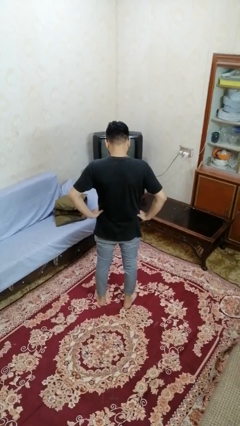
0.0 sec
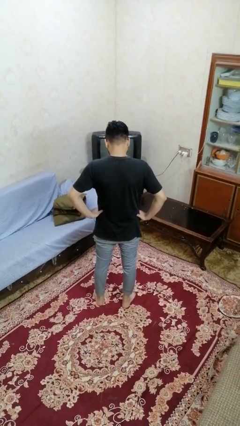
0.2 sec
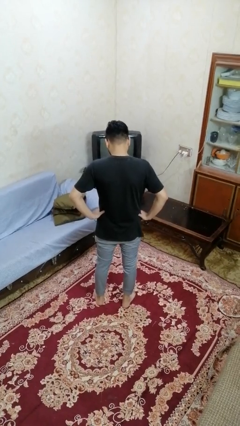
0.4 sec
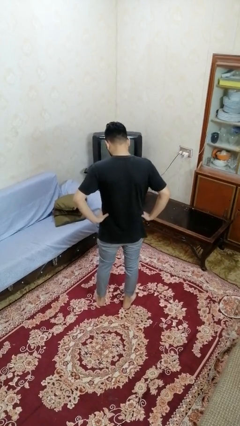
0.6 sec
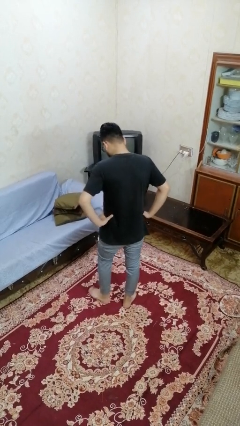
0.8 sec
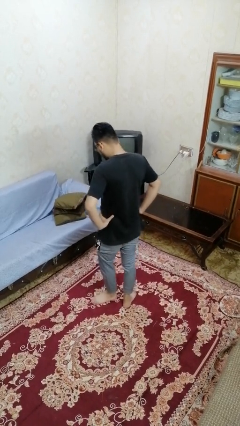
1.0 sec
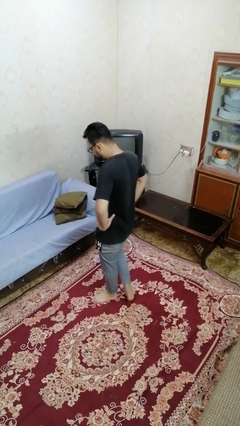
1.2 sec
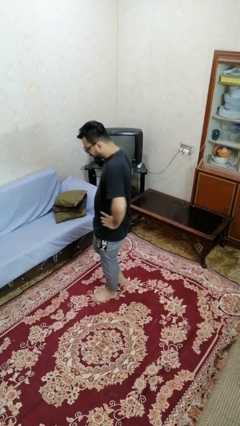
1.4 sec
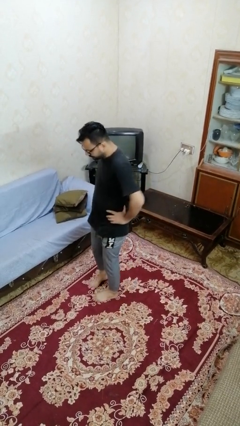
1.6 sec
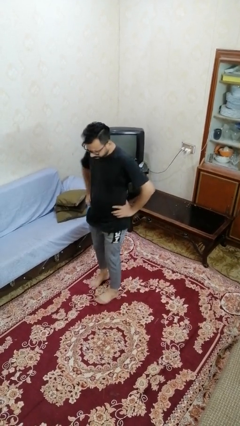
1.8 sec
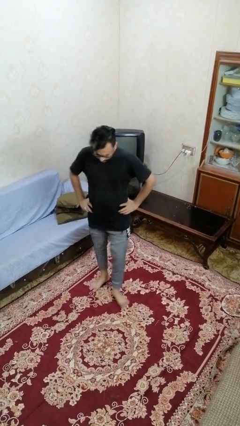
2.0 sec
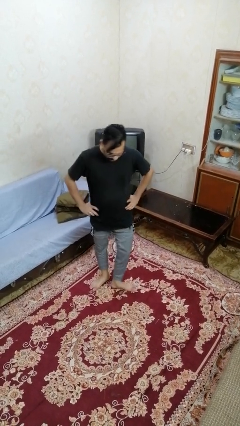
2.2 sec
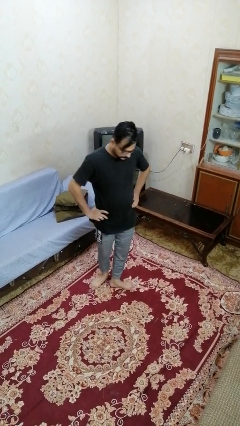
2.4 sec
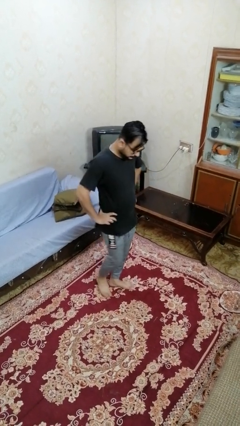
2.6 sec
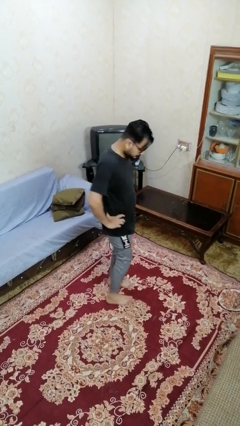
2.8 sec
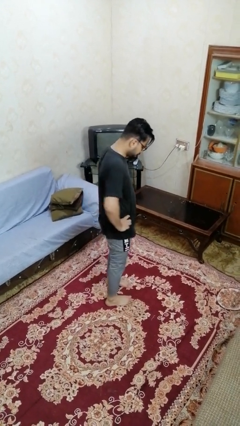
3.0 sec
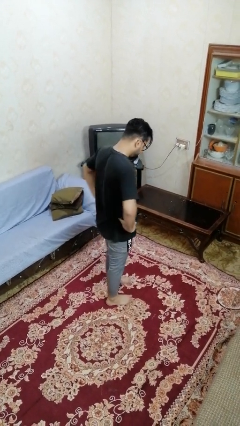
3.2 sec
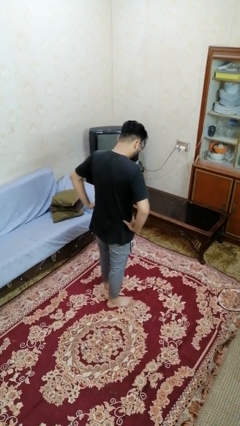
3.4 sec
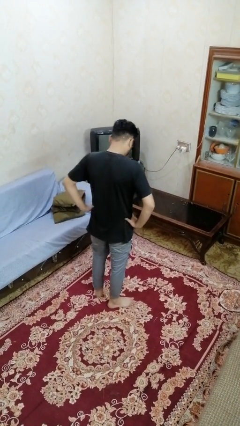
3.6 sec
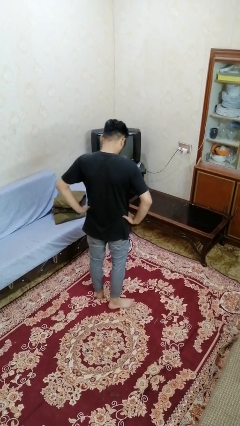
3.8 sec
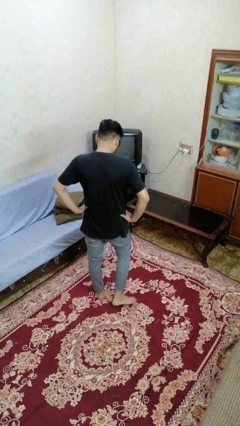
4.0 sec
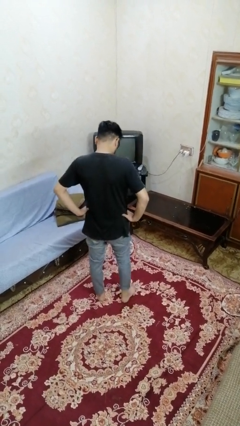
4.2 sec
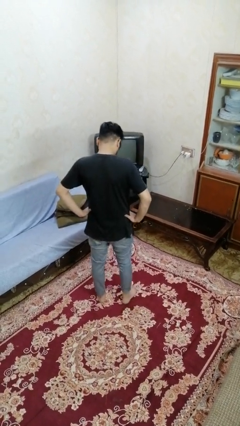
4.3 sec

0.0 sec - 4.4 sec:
person twirls

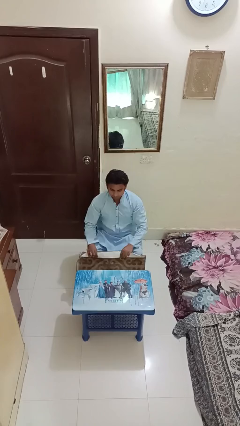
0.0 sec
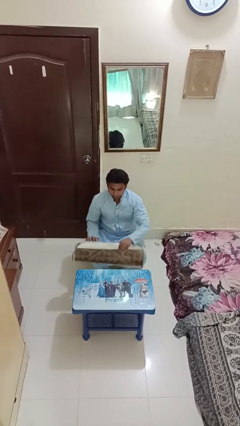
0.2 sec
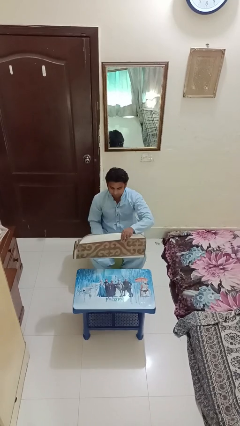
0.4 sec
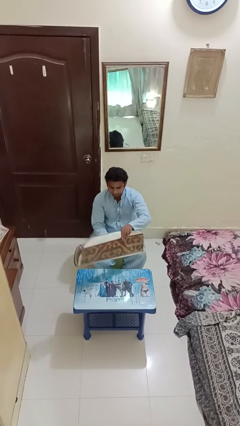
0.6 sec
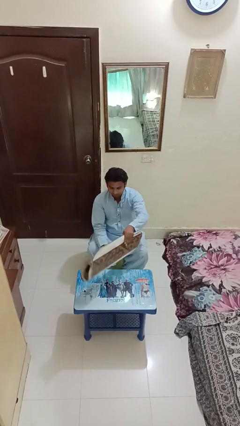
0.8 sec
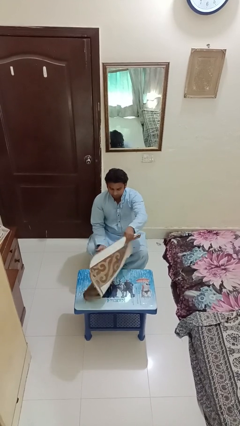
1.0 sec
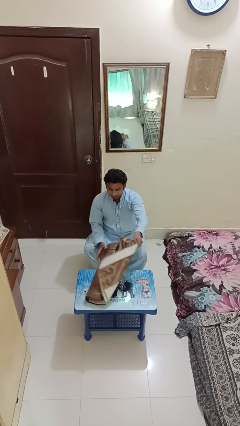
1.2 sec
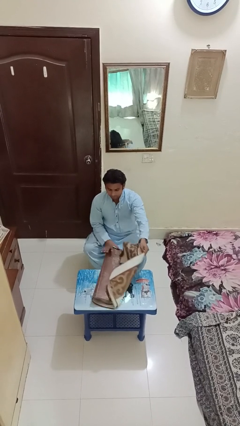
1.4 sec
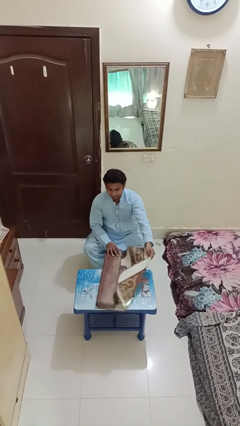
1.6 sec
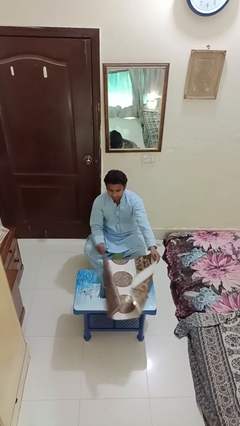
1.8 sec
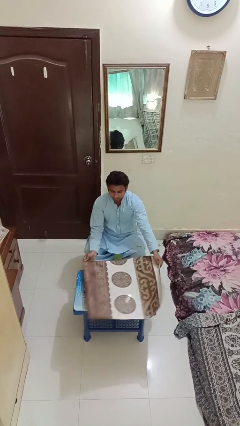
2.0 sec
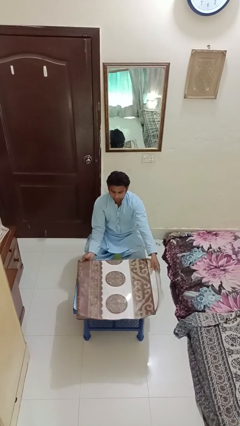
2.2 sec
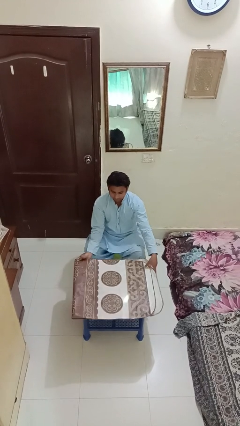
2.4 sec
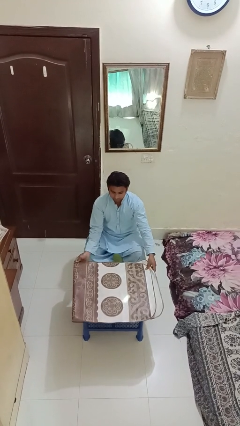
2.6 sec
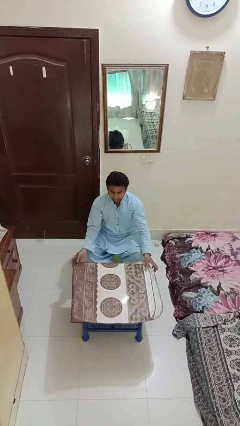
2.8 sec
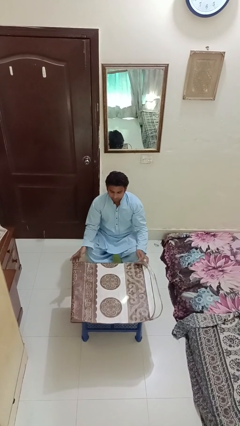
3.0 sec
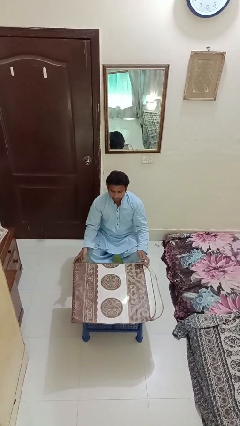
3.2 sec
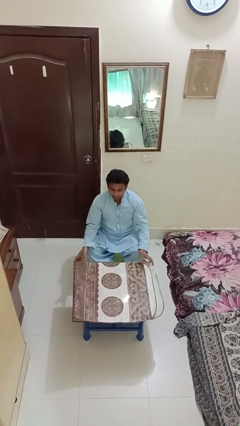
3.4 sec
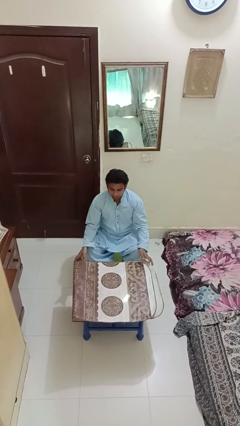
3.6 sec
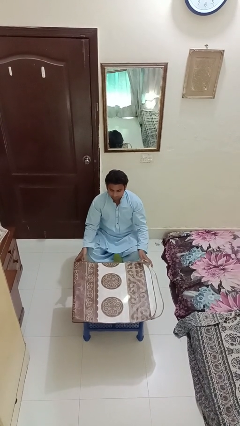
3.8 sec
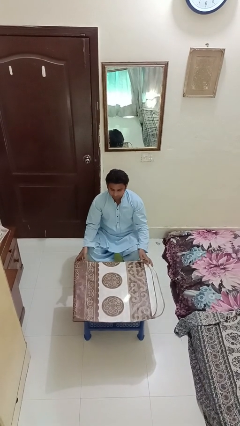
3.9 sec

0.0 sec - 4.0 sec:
person spreads tablecloth

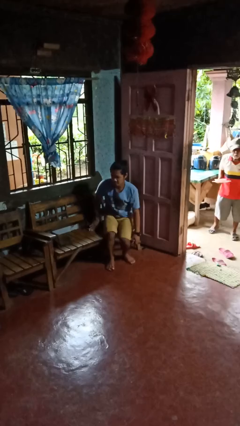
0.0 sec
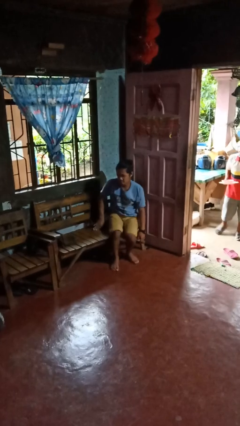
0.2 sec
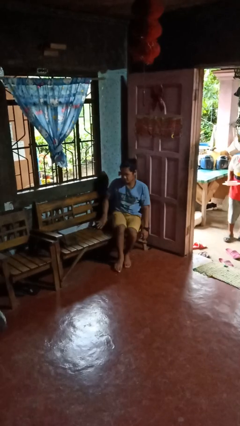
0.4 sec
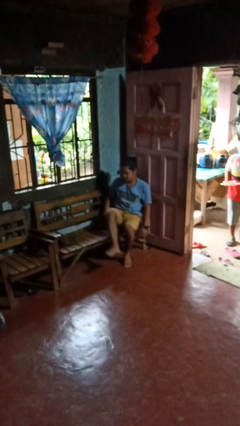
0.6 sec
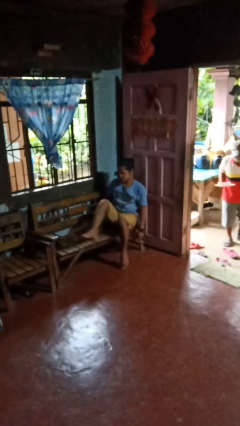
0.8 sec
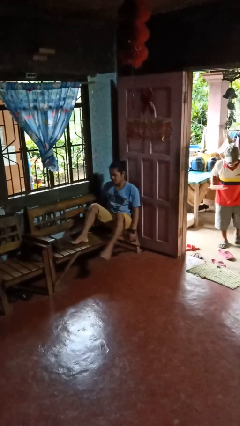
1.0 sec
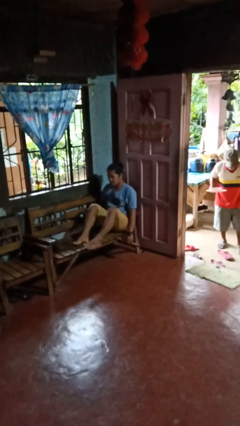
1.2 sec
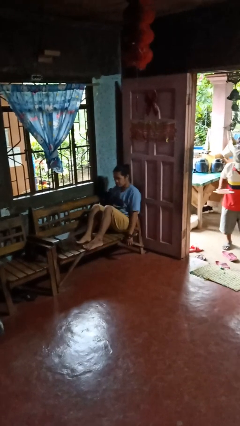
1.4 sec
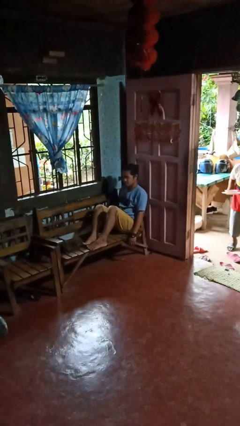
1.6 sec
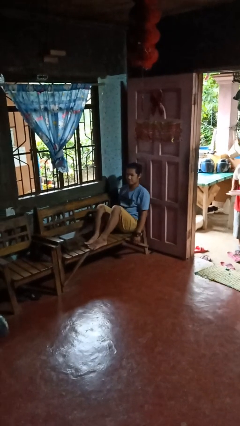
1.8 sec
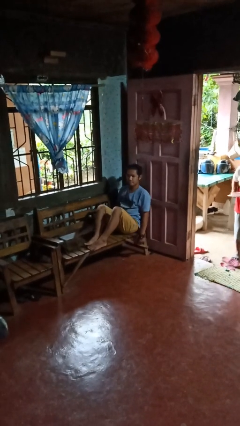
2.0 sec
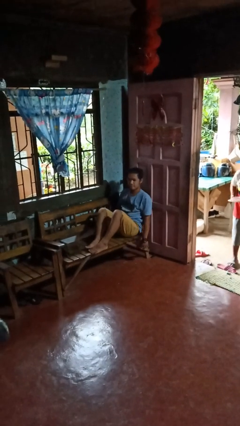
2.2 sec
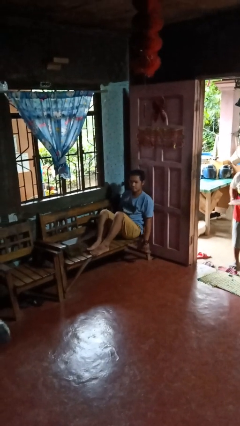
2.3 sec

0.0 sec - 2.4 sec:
person sits down

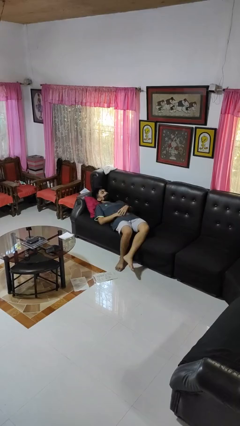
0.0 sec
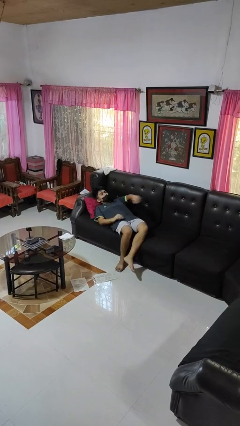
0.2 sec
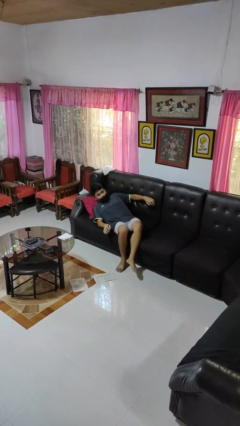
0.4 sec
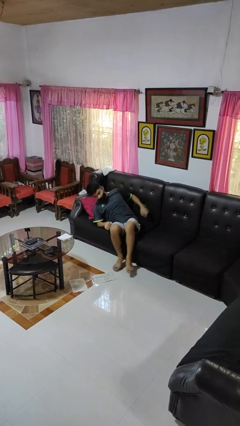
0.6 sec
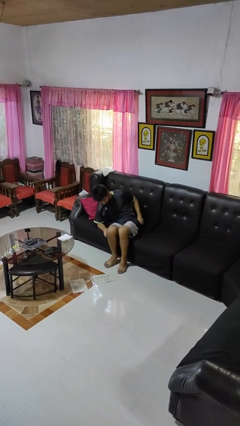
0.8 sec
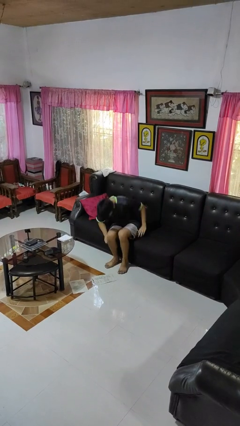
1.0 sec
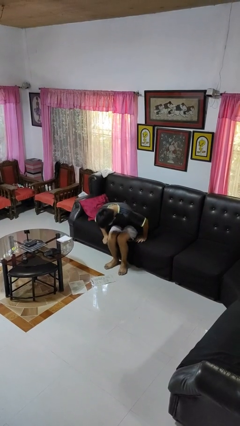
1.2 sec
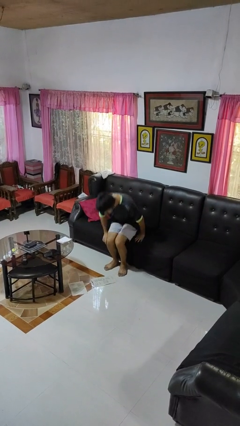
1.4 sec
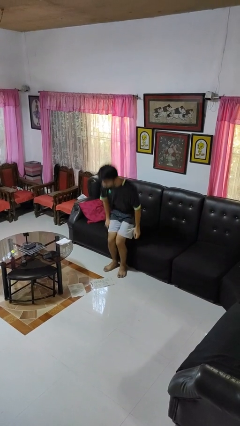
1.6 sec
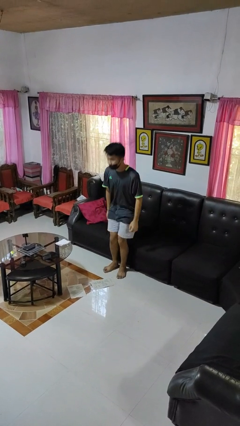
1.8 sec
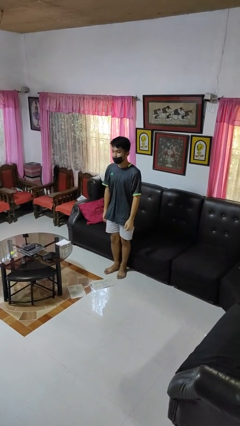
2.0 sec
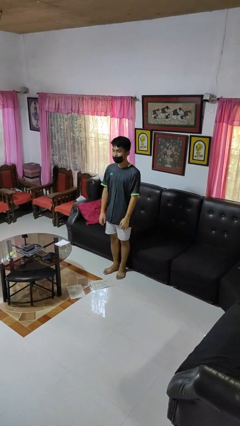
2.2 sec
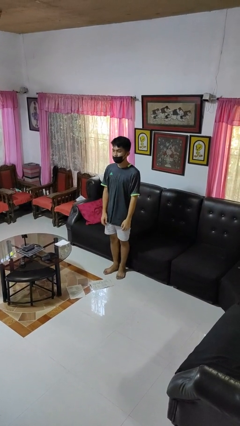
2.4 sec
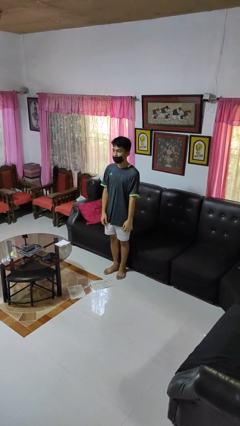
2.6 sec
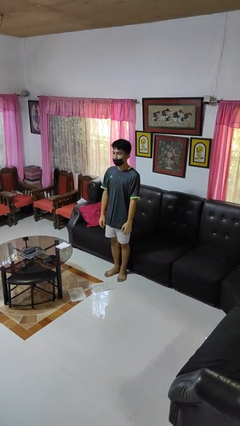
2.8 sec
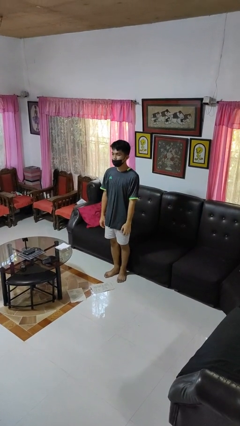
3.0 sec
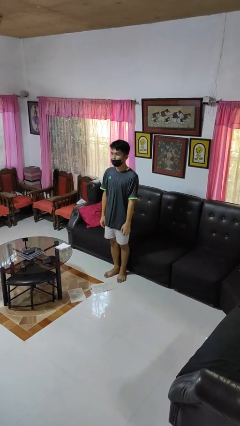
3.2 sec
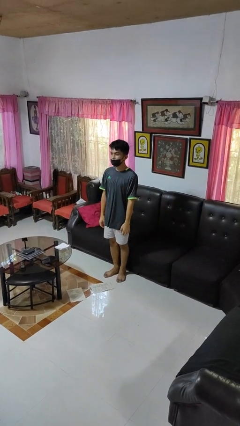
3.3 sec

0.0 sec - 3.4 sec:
person stands up

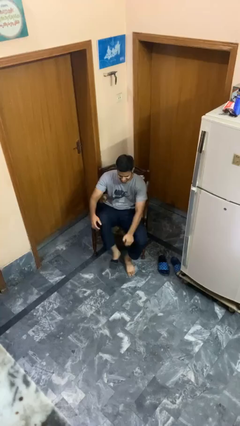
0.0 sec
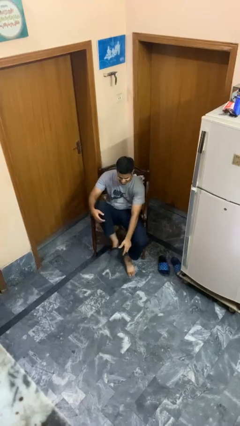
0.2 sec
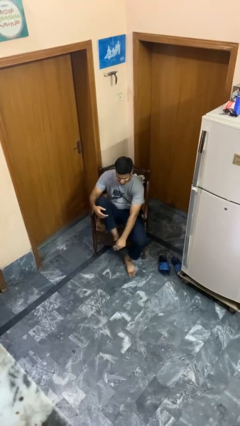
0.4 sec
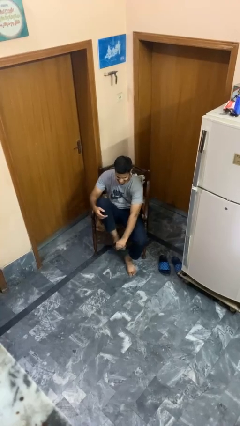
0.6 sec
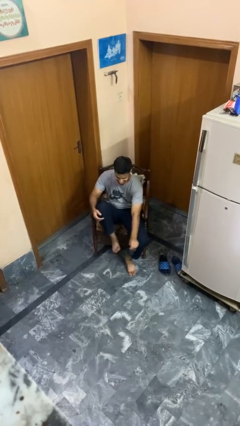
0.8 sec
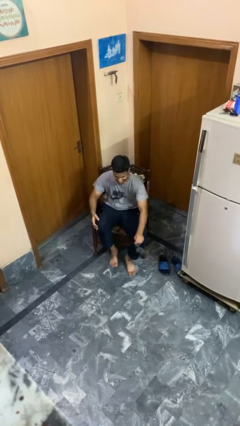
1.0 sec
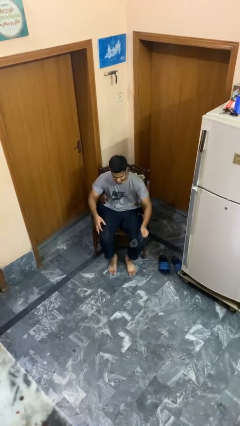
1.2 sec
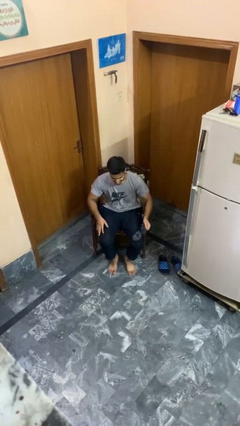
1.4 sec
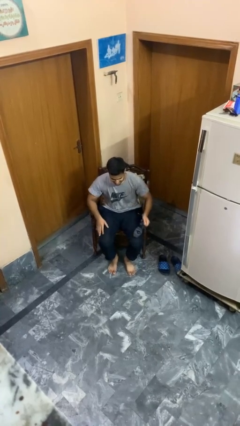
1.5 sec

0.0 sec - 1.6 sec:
person takes off socks

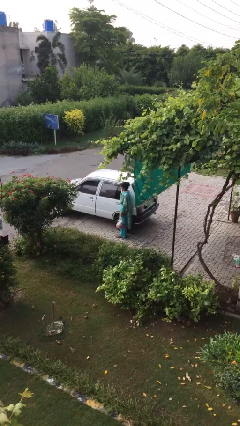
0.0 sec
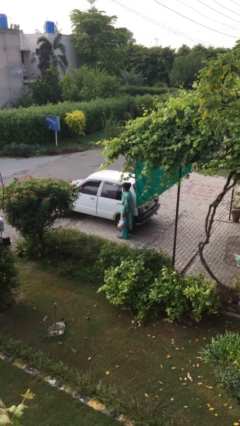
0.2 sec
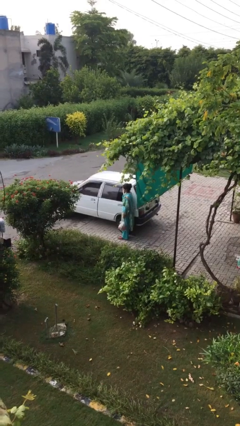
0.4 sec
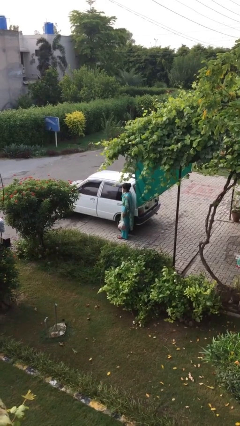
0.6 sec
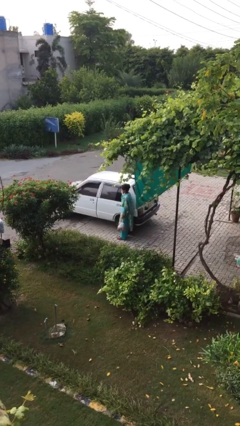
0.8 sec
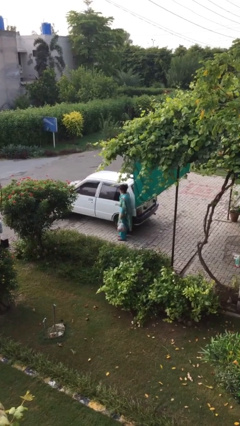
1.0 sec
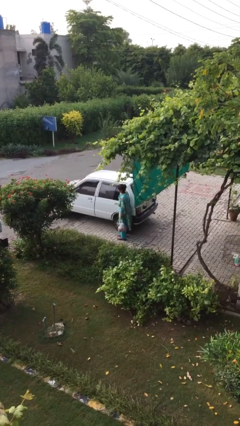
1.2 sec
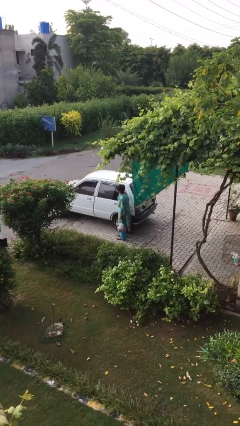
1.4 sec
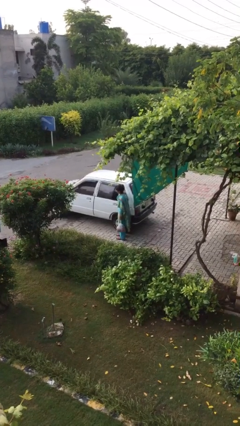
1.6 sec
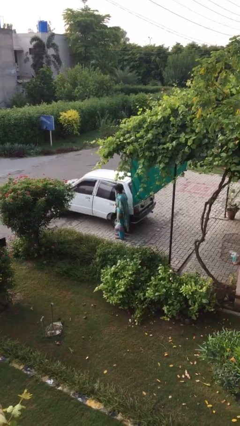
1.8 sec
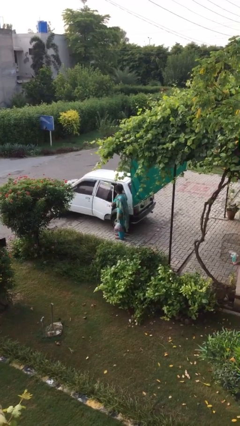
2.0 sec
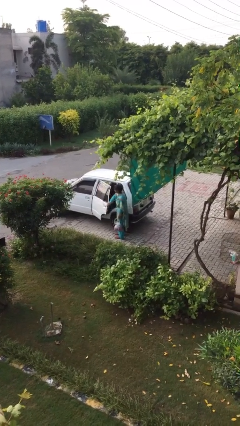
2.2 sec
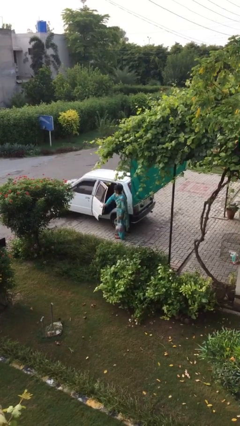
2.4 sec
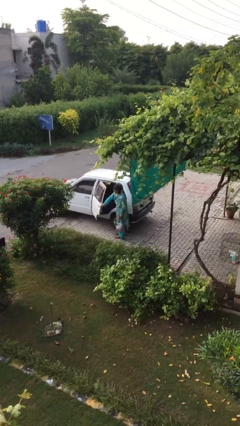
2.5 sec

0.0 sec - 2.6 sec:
person opens car door
